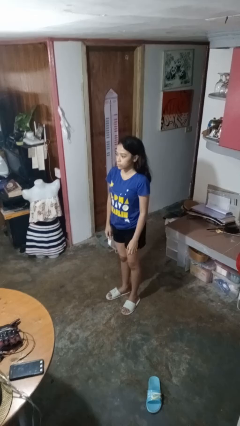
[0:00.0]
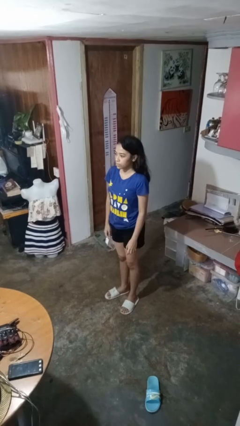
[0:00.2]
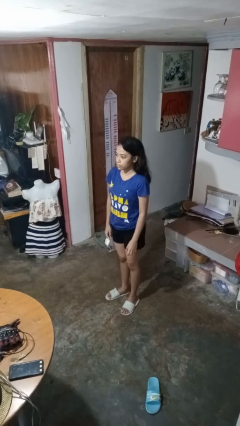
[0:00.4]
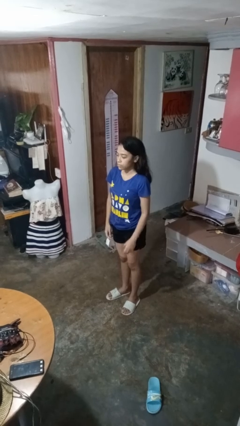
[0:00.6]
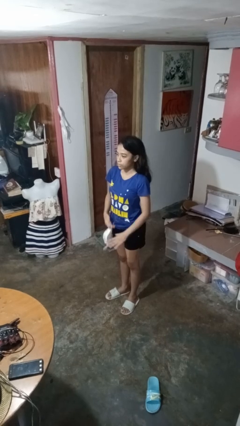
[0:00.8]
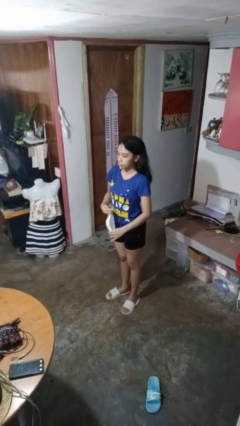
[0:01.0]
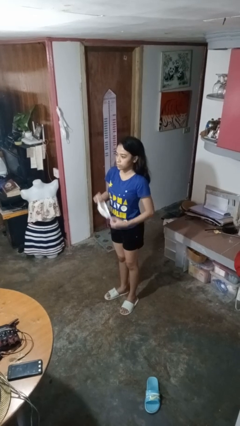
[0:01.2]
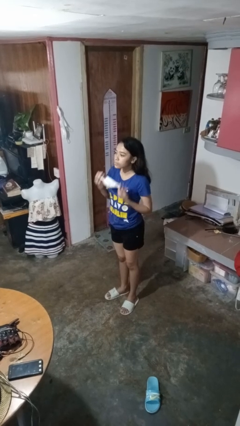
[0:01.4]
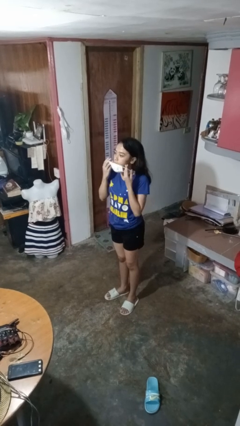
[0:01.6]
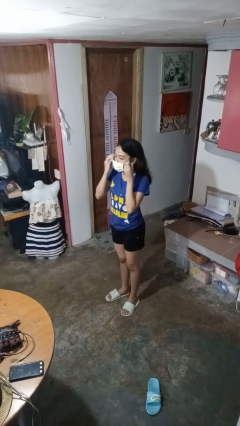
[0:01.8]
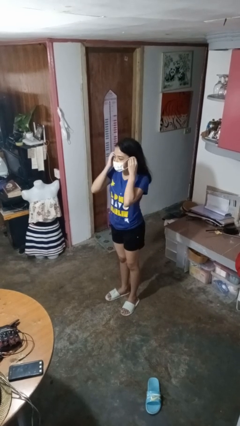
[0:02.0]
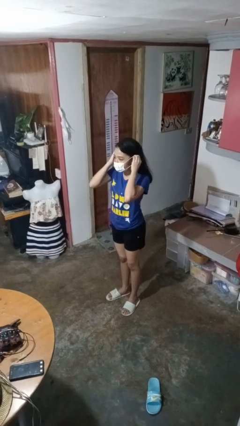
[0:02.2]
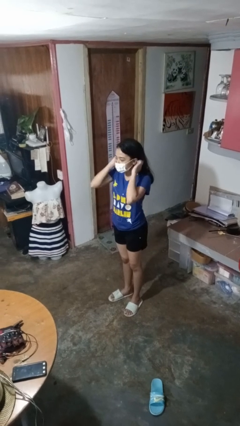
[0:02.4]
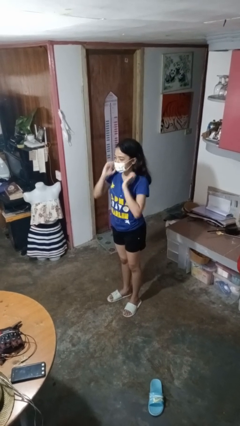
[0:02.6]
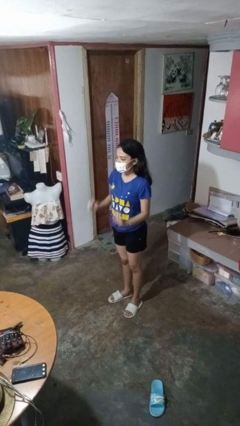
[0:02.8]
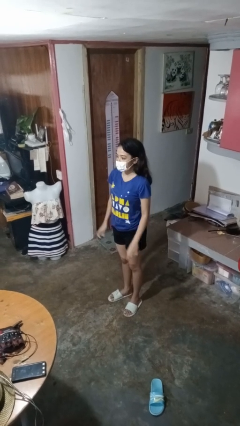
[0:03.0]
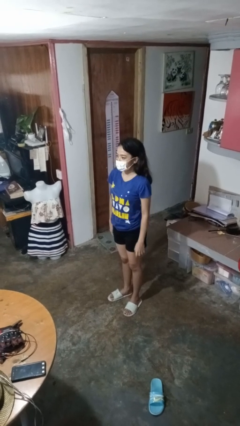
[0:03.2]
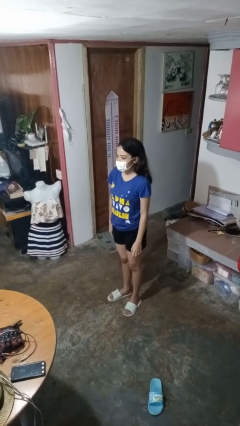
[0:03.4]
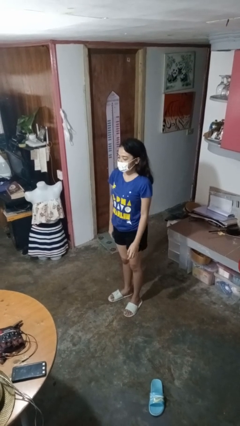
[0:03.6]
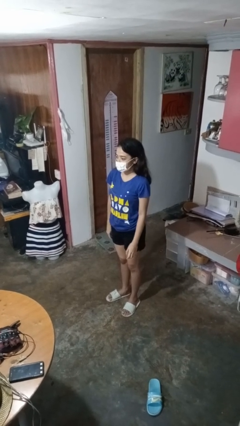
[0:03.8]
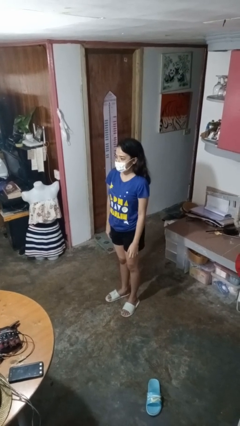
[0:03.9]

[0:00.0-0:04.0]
person puts on facemask

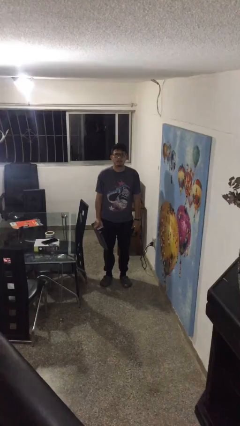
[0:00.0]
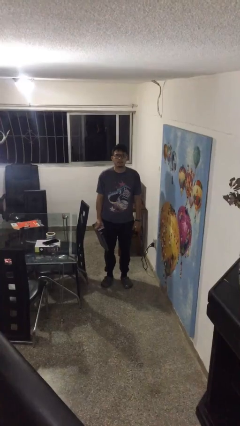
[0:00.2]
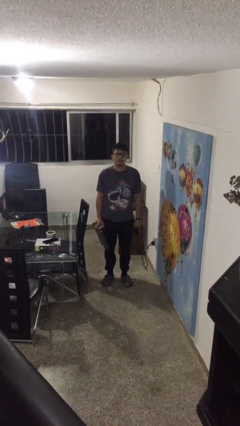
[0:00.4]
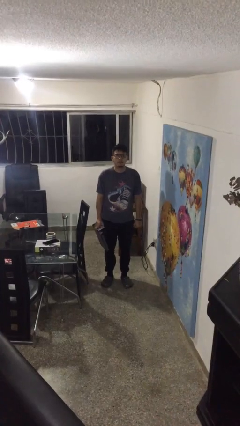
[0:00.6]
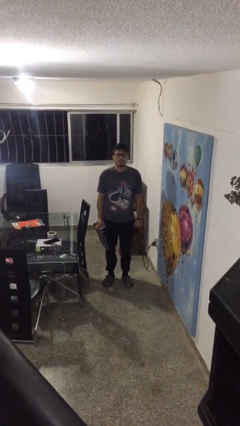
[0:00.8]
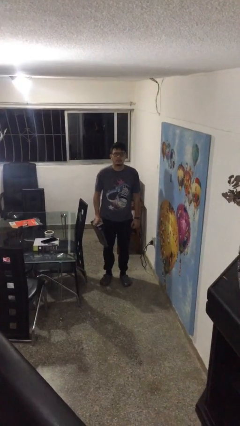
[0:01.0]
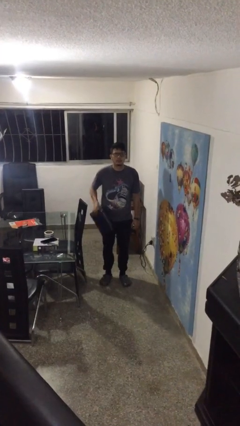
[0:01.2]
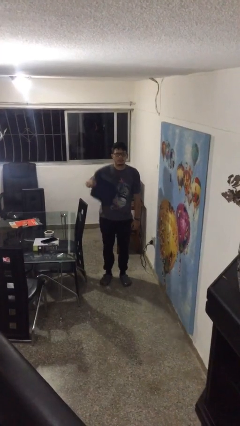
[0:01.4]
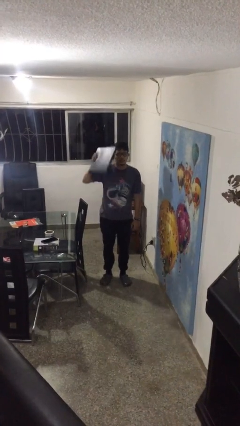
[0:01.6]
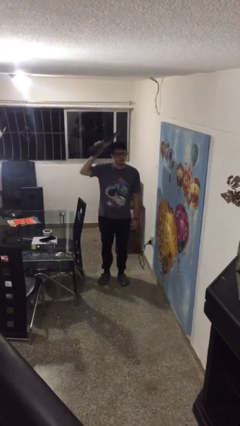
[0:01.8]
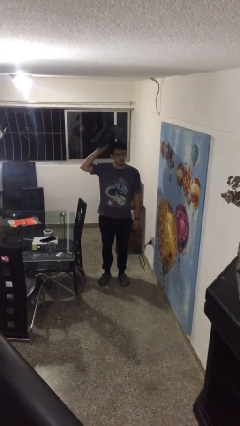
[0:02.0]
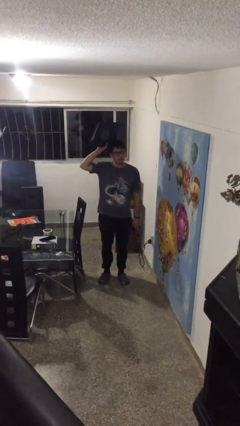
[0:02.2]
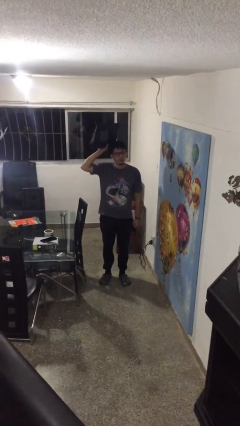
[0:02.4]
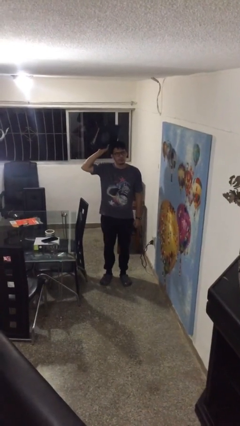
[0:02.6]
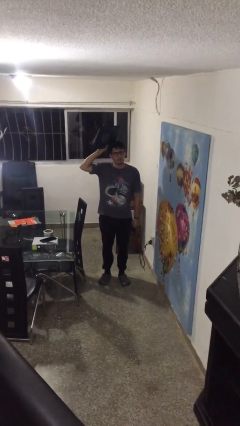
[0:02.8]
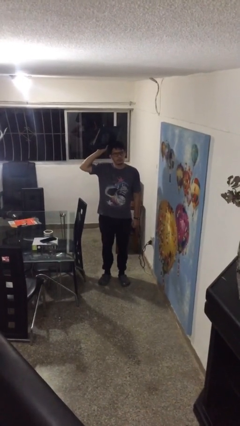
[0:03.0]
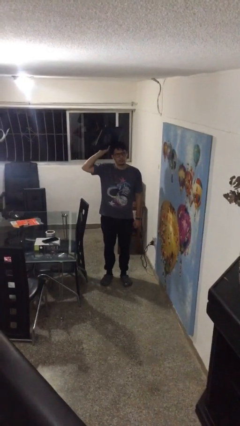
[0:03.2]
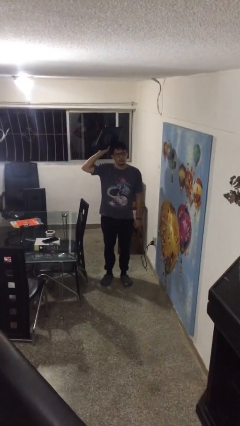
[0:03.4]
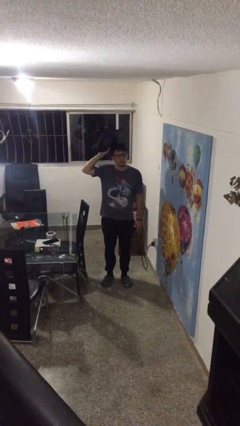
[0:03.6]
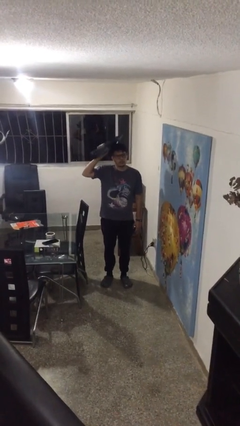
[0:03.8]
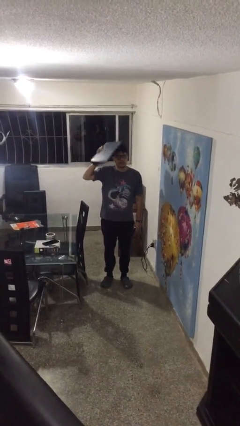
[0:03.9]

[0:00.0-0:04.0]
person holds object above head

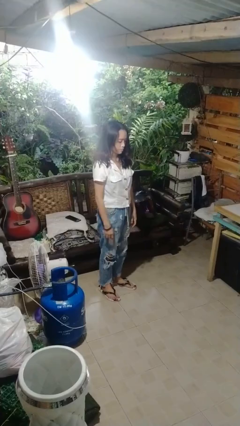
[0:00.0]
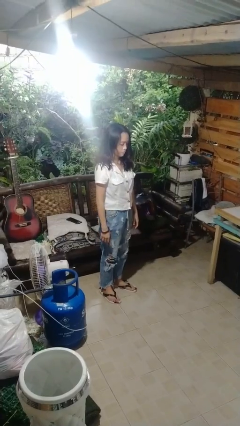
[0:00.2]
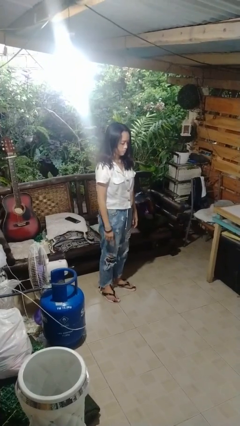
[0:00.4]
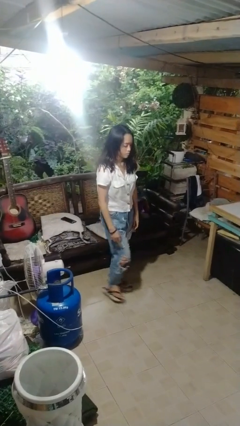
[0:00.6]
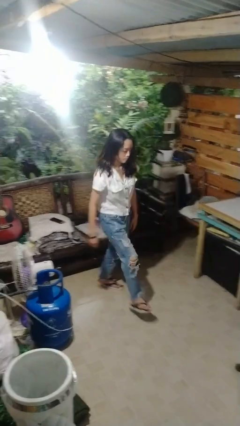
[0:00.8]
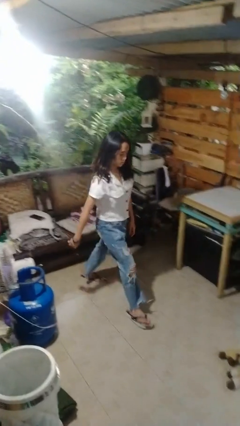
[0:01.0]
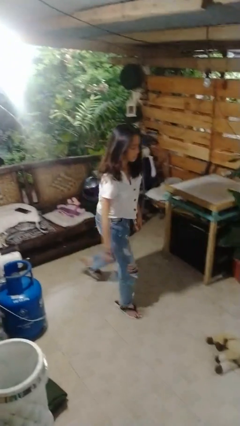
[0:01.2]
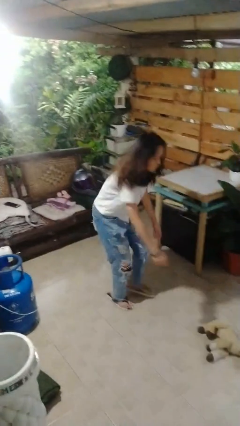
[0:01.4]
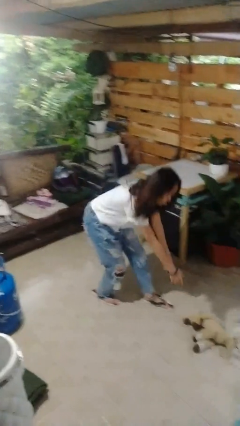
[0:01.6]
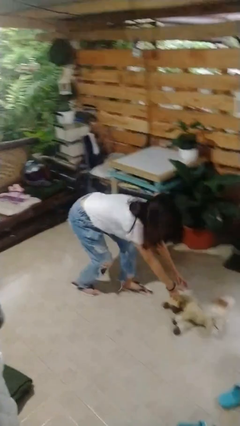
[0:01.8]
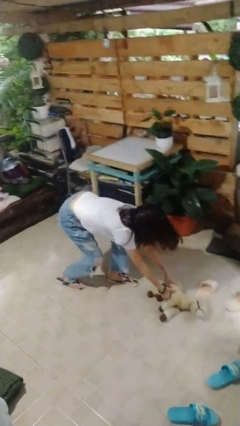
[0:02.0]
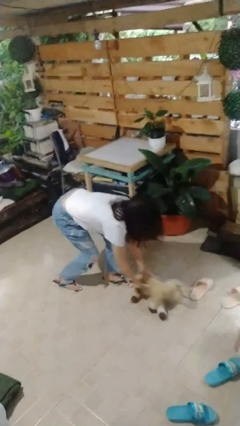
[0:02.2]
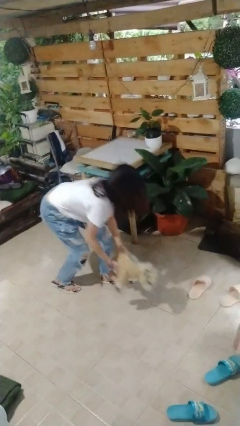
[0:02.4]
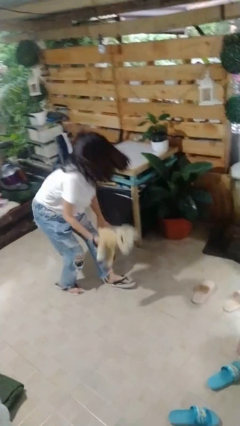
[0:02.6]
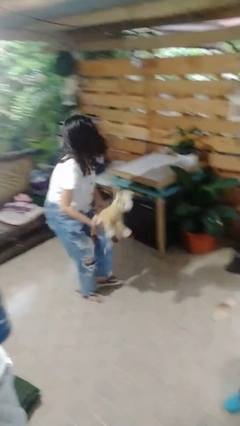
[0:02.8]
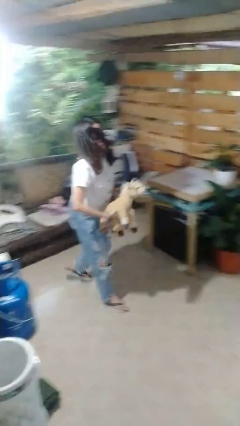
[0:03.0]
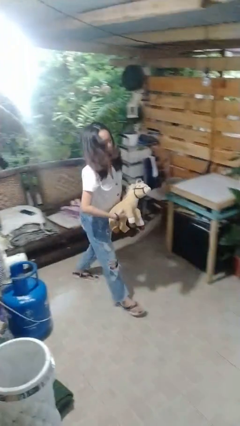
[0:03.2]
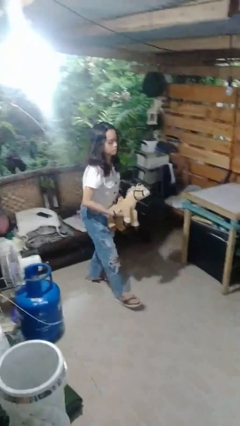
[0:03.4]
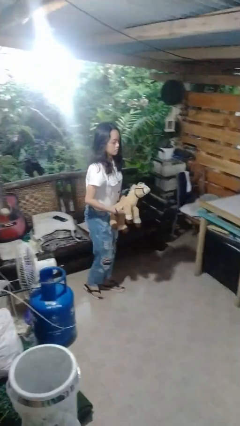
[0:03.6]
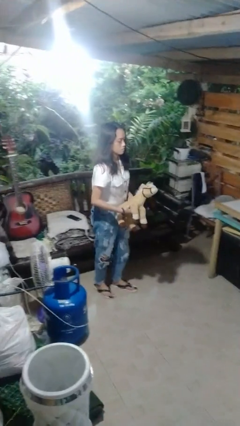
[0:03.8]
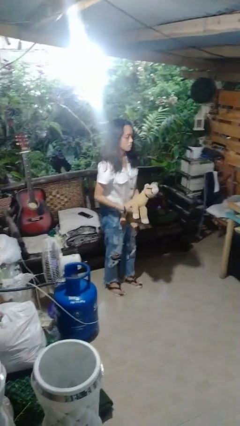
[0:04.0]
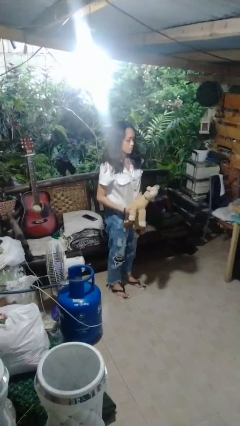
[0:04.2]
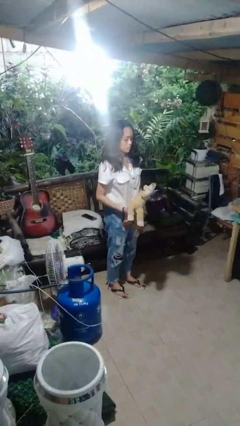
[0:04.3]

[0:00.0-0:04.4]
person picks up object from floor

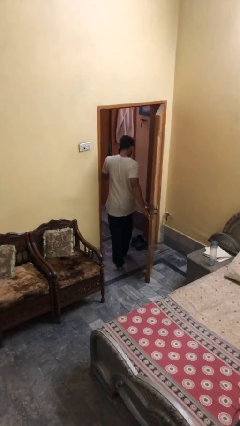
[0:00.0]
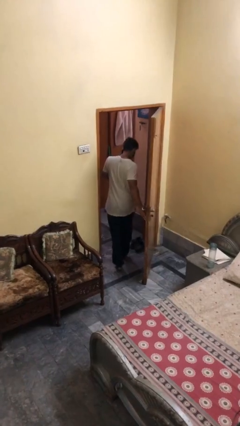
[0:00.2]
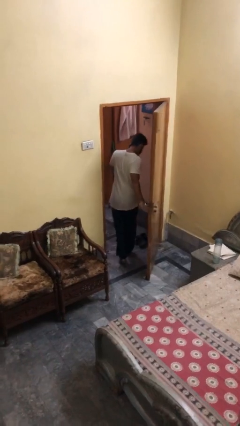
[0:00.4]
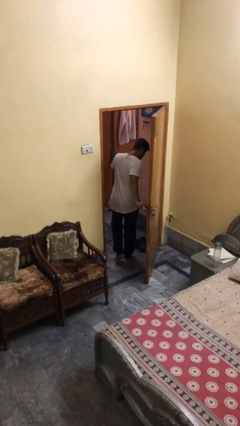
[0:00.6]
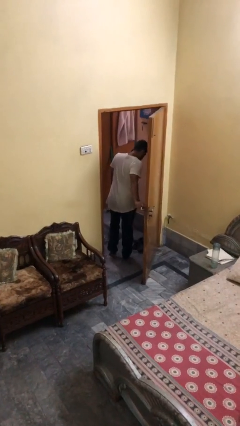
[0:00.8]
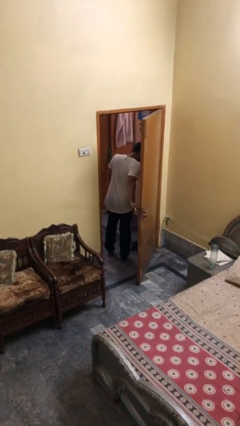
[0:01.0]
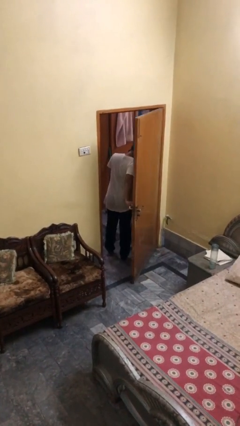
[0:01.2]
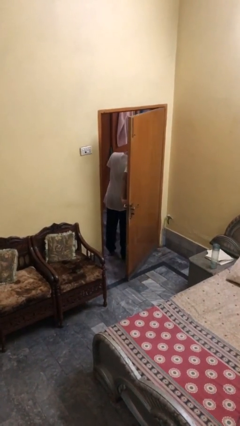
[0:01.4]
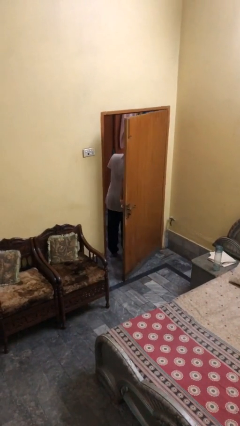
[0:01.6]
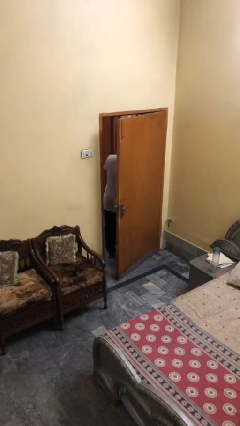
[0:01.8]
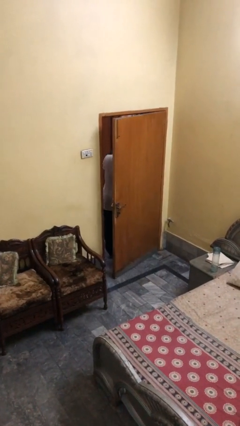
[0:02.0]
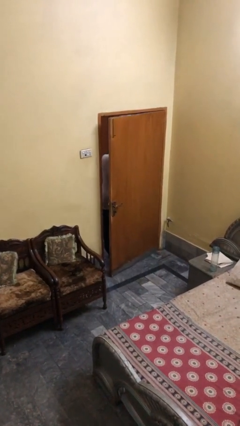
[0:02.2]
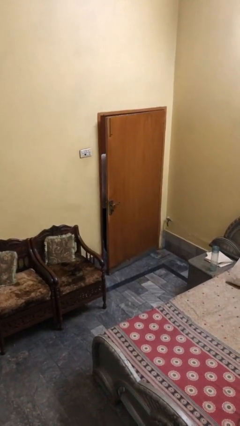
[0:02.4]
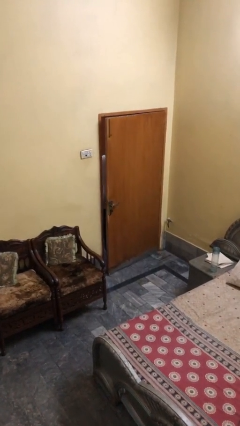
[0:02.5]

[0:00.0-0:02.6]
person closes facility door

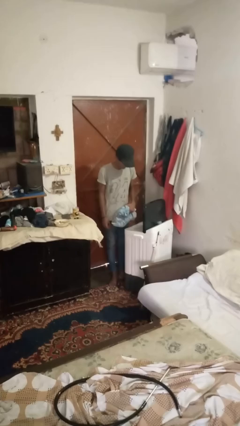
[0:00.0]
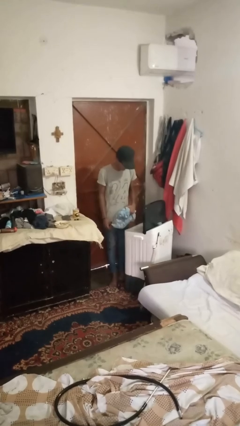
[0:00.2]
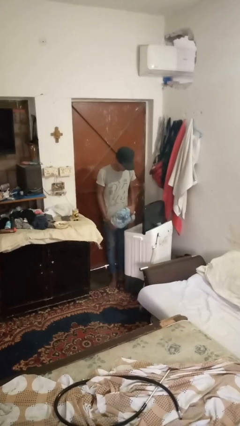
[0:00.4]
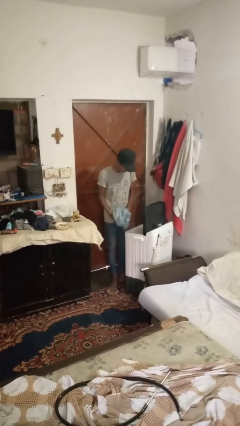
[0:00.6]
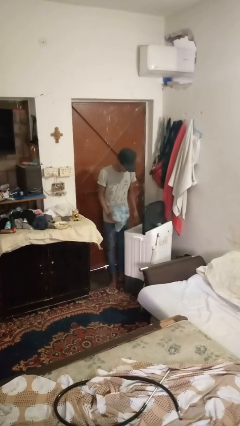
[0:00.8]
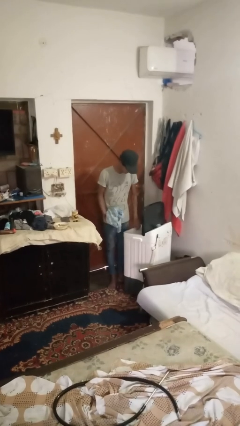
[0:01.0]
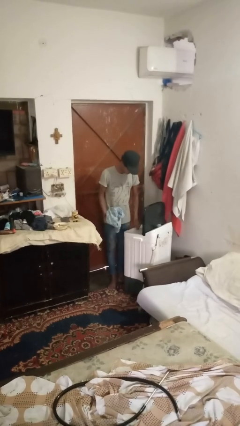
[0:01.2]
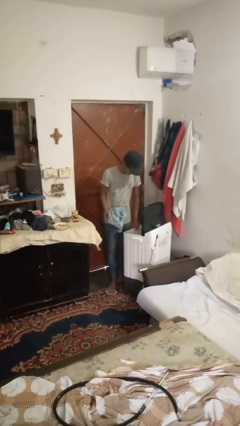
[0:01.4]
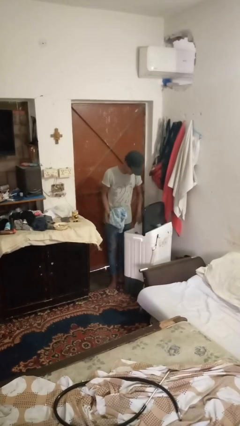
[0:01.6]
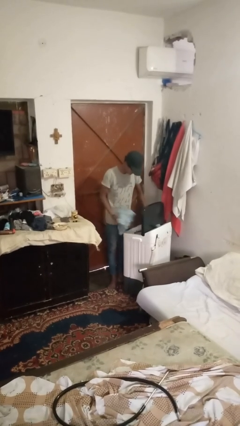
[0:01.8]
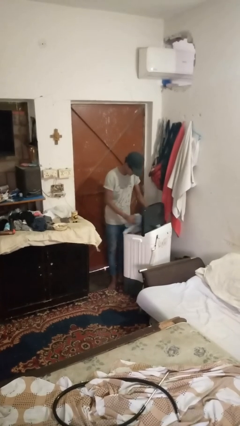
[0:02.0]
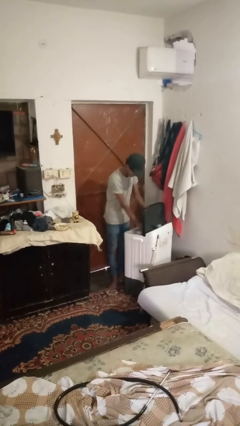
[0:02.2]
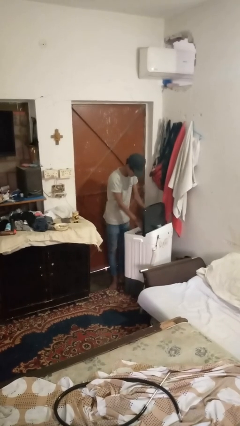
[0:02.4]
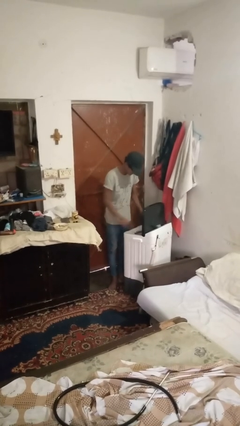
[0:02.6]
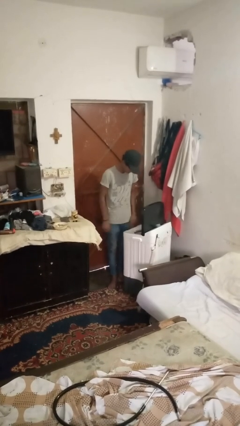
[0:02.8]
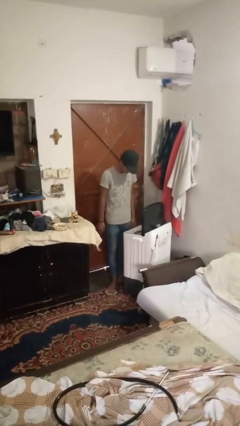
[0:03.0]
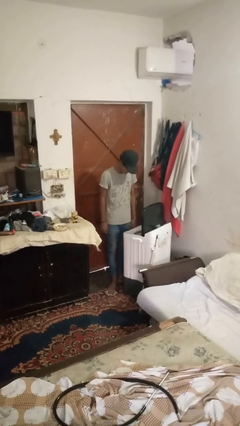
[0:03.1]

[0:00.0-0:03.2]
person loads clotheswasher
